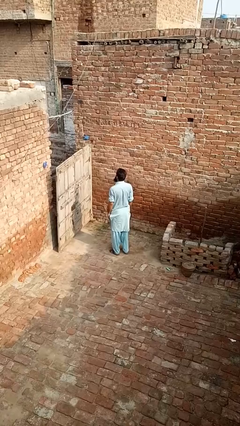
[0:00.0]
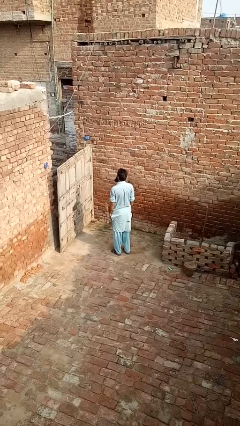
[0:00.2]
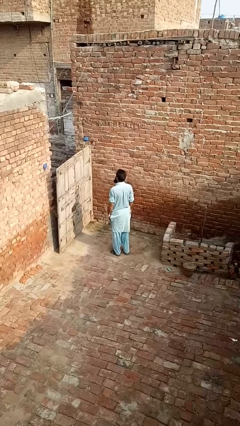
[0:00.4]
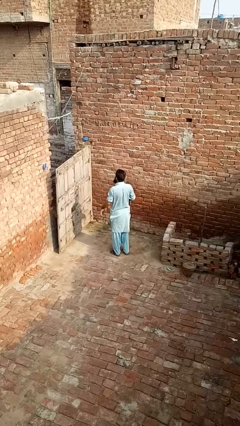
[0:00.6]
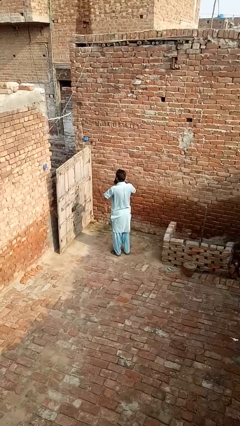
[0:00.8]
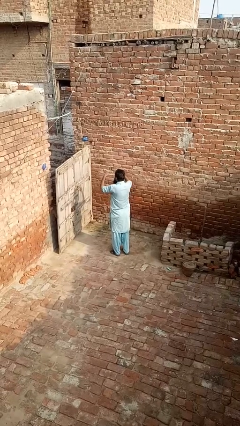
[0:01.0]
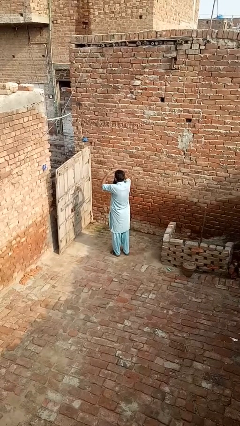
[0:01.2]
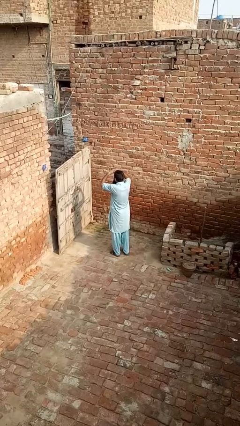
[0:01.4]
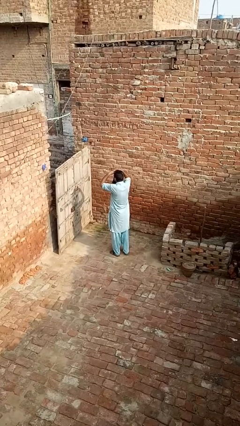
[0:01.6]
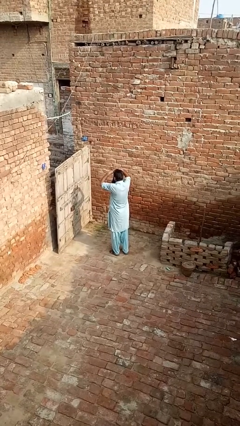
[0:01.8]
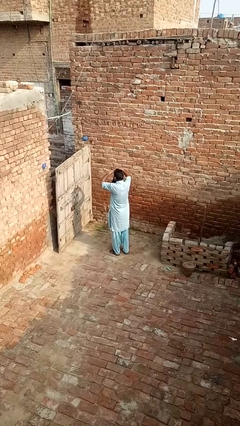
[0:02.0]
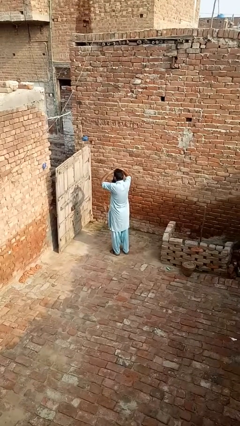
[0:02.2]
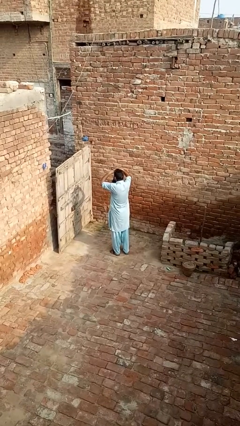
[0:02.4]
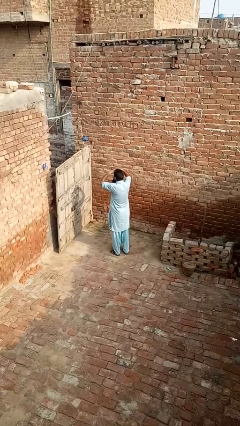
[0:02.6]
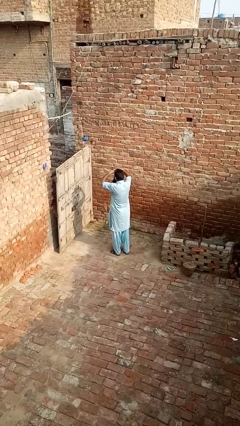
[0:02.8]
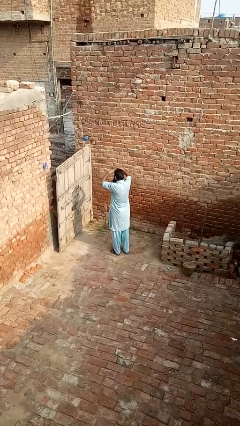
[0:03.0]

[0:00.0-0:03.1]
person shades eyes

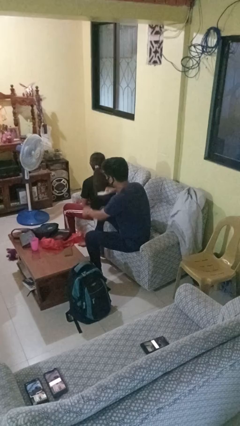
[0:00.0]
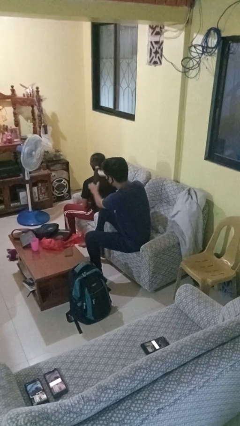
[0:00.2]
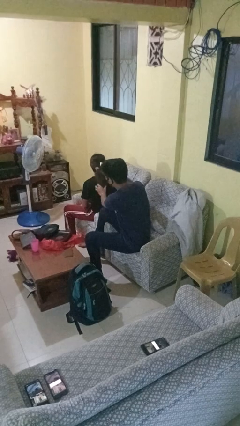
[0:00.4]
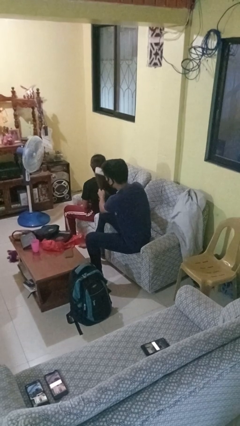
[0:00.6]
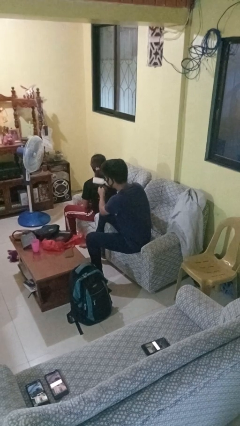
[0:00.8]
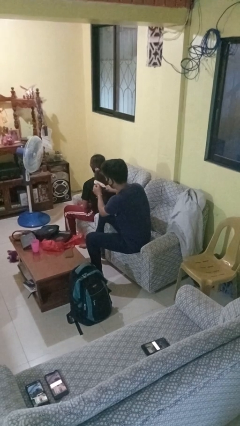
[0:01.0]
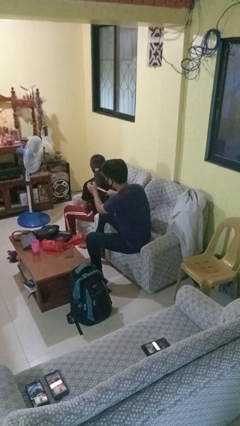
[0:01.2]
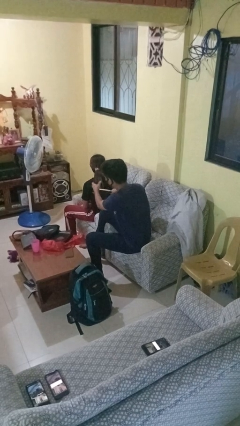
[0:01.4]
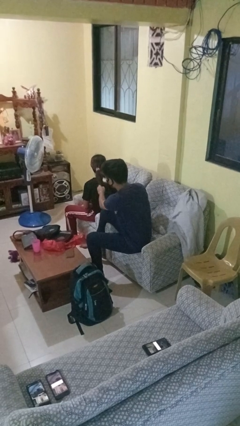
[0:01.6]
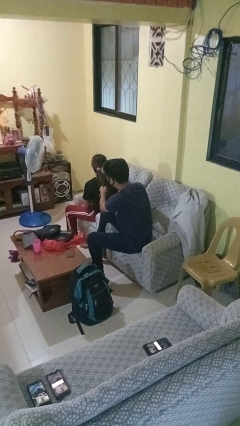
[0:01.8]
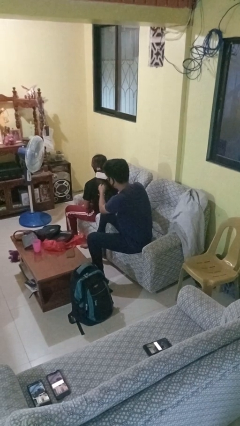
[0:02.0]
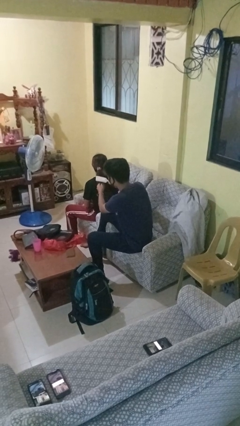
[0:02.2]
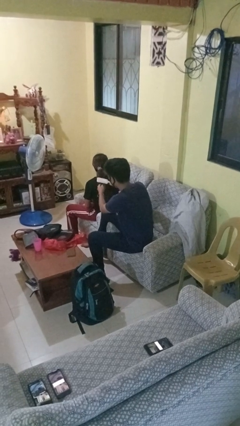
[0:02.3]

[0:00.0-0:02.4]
person brushes hair of person

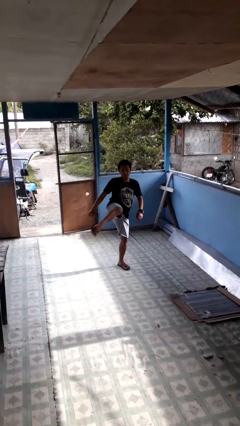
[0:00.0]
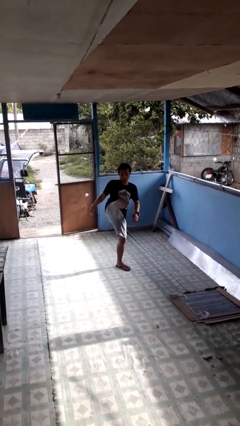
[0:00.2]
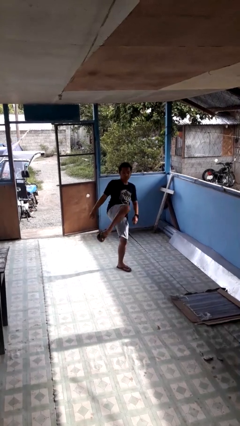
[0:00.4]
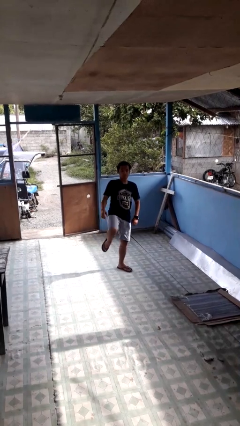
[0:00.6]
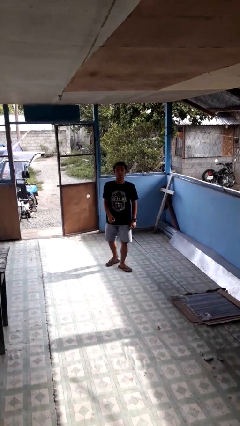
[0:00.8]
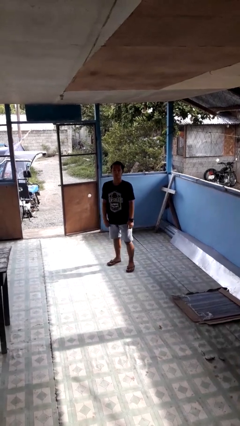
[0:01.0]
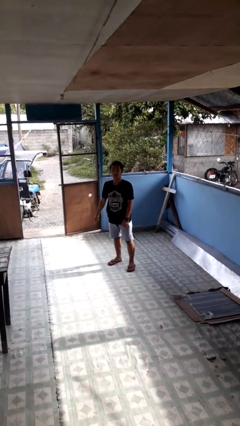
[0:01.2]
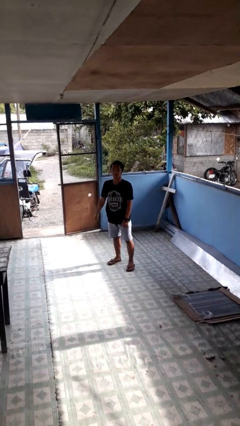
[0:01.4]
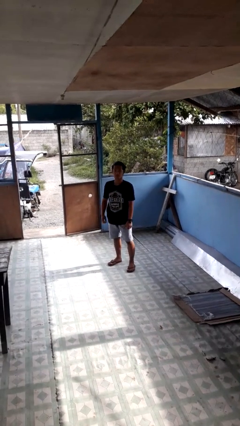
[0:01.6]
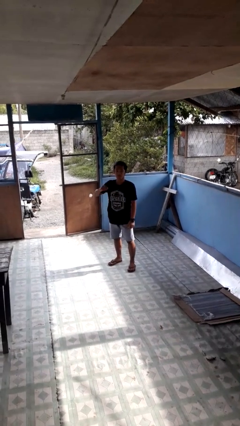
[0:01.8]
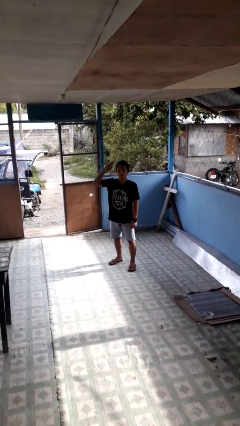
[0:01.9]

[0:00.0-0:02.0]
person karate kicks

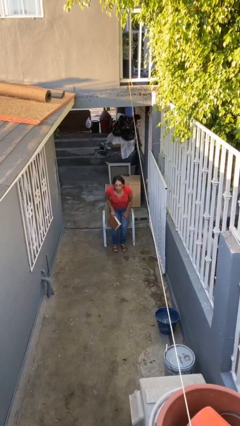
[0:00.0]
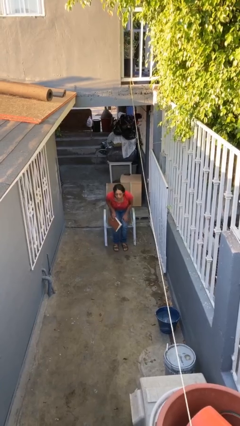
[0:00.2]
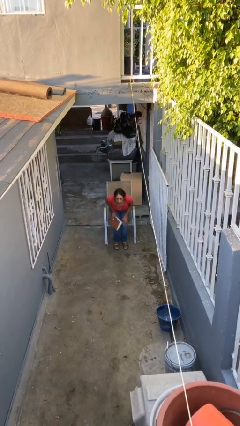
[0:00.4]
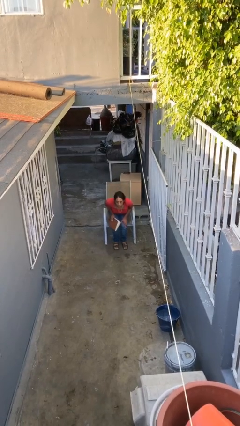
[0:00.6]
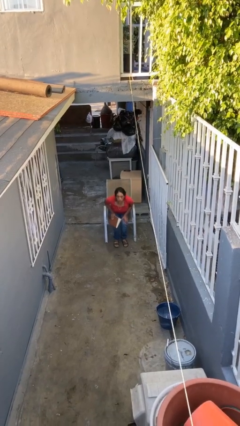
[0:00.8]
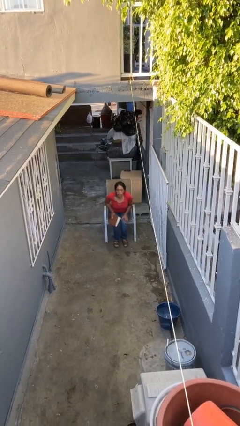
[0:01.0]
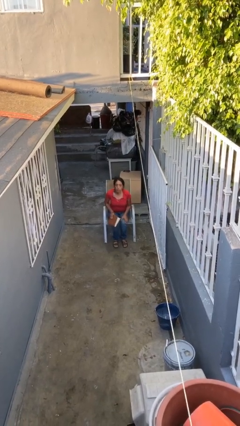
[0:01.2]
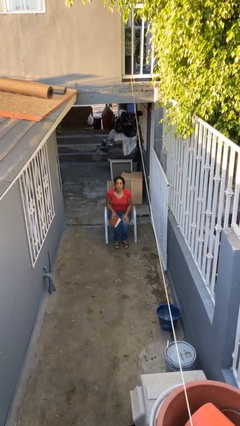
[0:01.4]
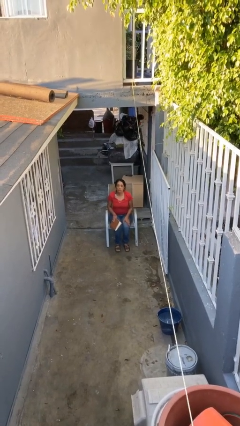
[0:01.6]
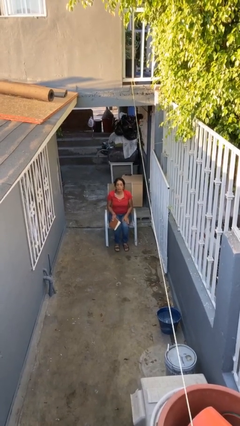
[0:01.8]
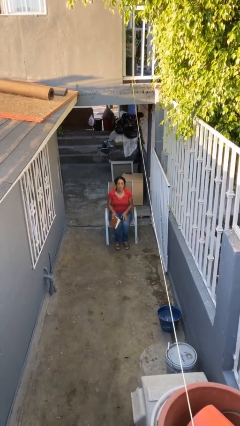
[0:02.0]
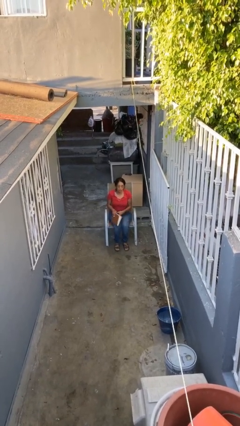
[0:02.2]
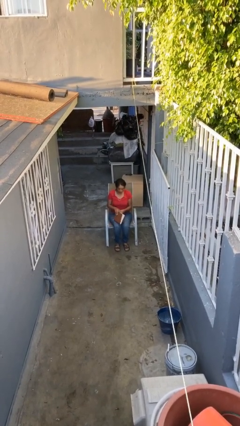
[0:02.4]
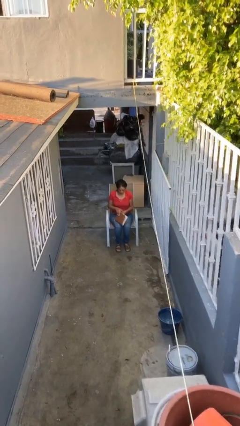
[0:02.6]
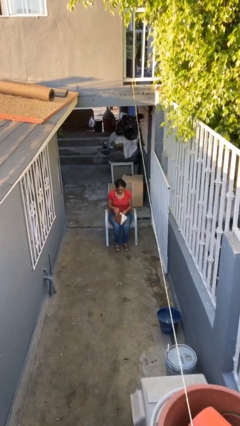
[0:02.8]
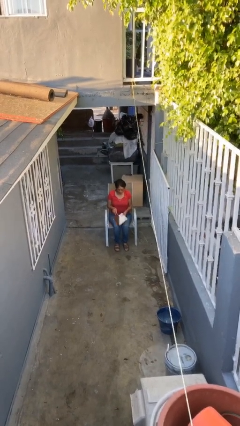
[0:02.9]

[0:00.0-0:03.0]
person sits down

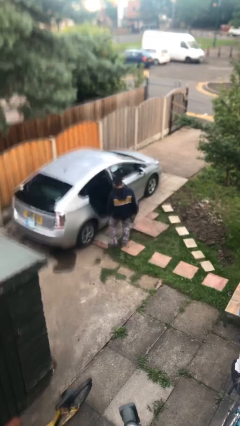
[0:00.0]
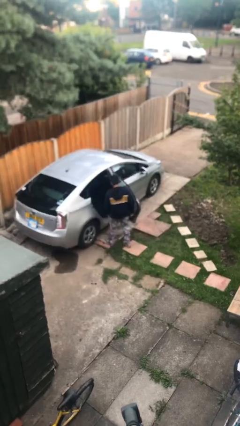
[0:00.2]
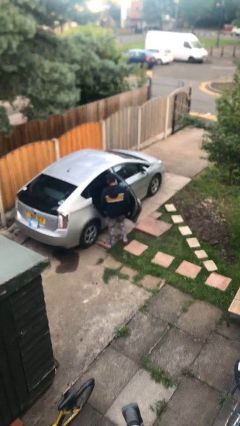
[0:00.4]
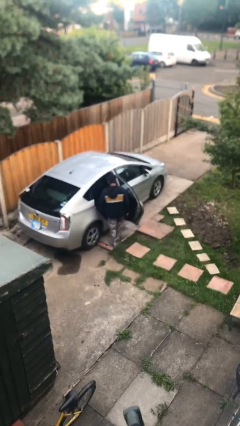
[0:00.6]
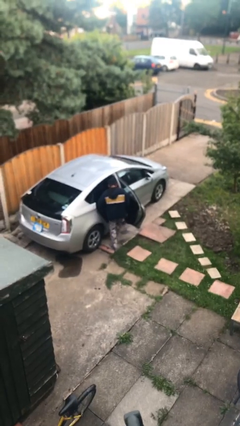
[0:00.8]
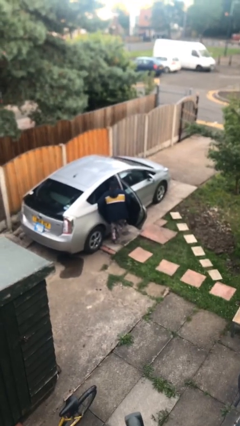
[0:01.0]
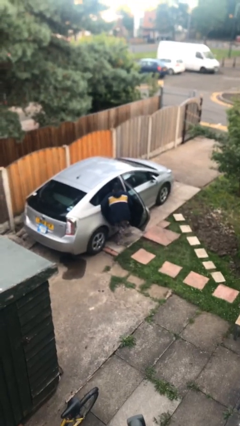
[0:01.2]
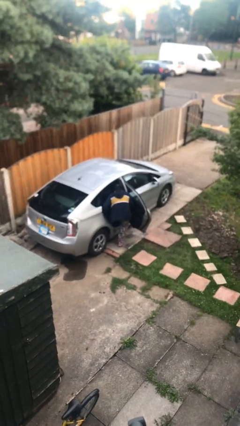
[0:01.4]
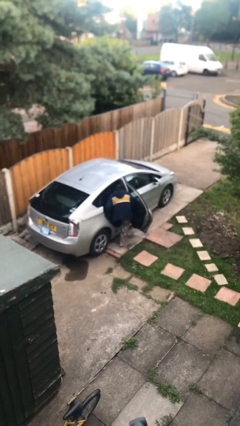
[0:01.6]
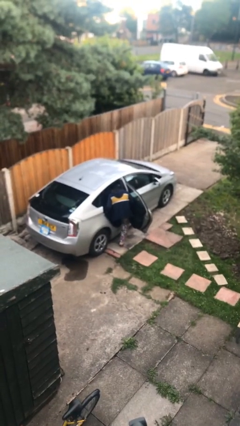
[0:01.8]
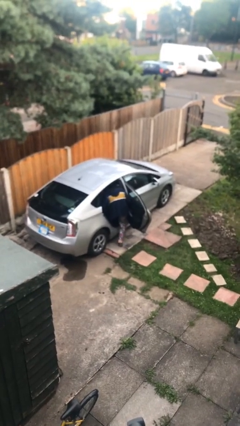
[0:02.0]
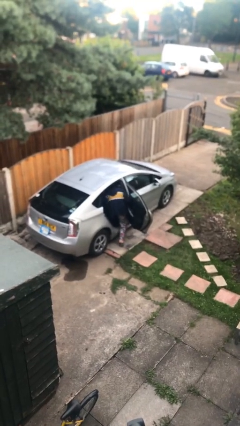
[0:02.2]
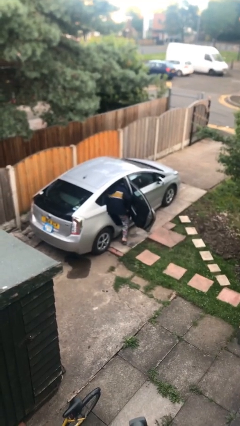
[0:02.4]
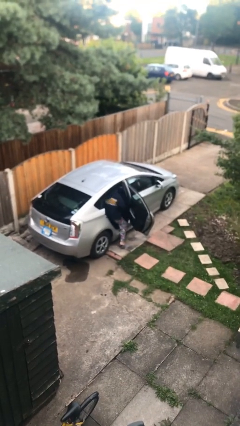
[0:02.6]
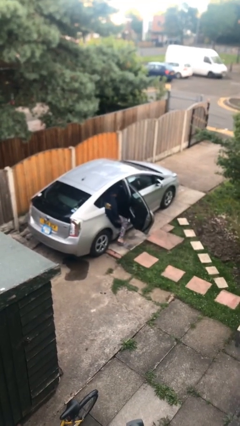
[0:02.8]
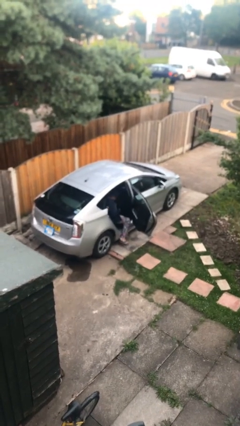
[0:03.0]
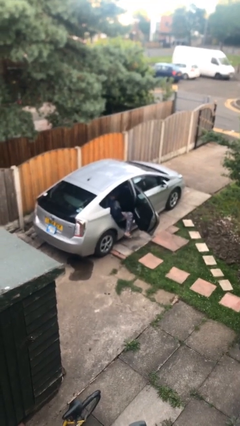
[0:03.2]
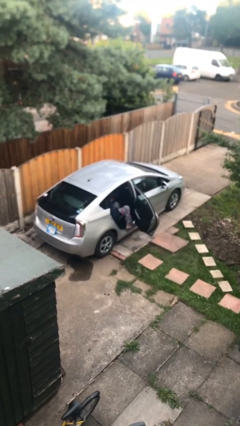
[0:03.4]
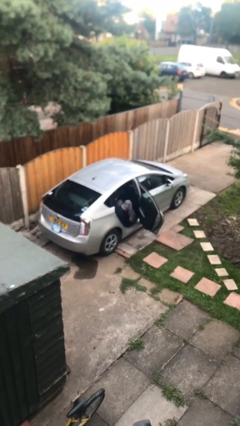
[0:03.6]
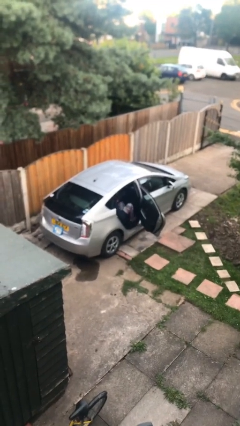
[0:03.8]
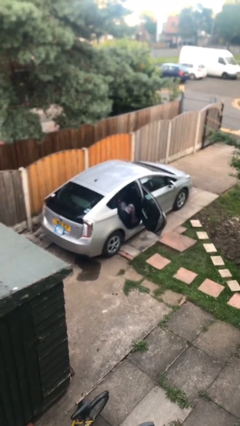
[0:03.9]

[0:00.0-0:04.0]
person enters car

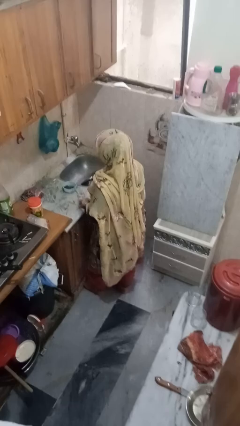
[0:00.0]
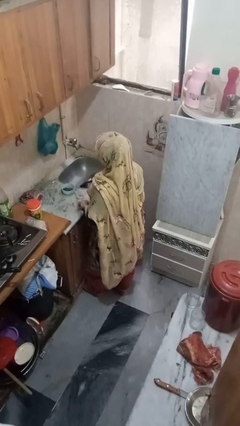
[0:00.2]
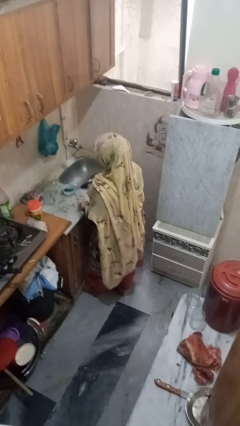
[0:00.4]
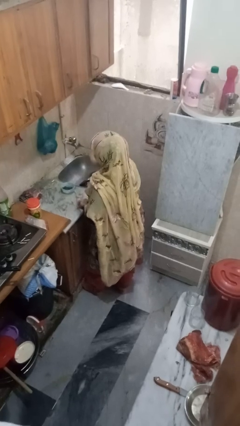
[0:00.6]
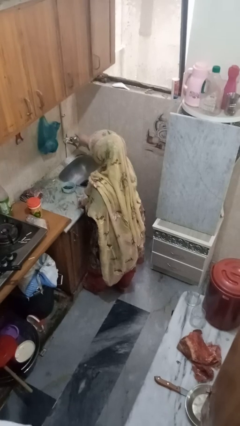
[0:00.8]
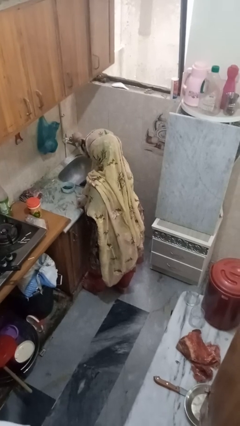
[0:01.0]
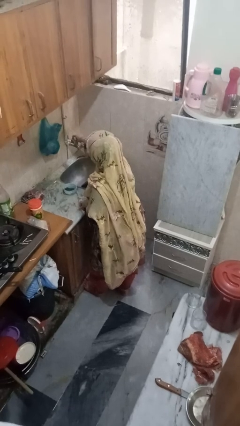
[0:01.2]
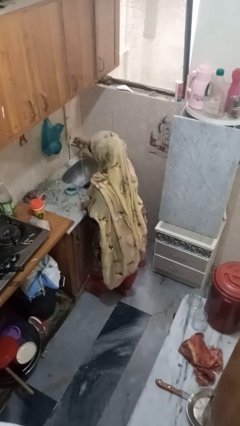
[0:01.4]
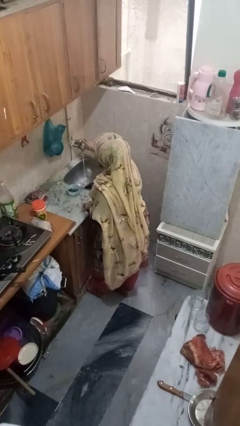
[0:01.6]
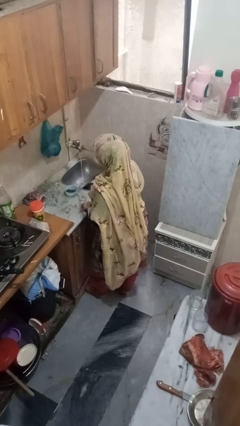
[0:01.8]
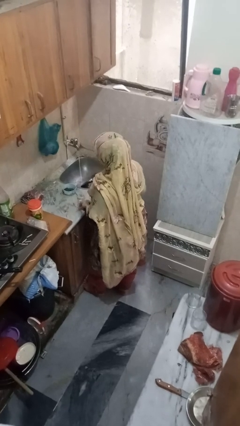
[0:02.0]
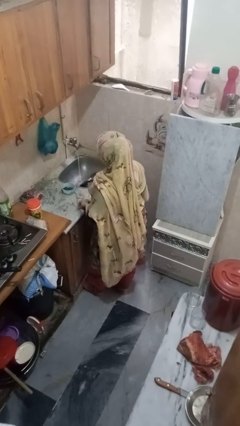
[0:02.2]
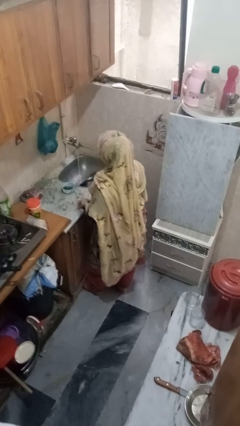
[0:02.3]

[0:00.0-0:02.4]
person turns on faucet

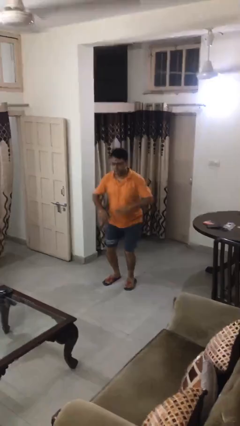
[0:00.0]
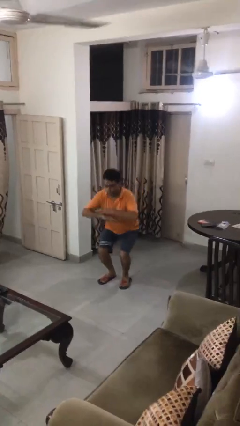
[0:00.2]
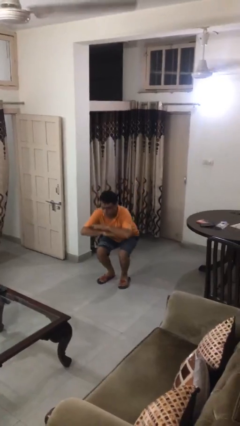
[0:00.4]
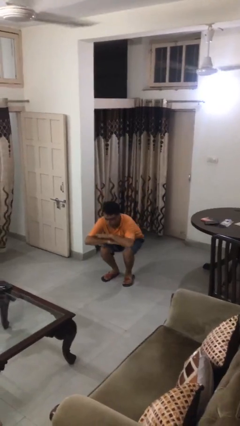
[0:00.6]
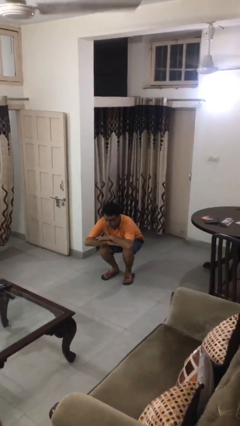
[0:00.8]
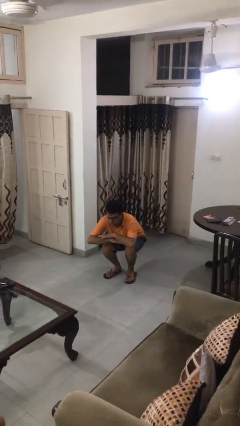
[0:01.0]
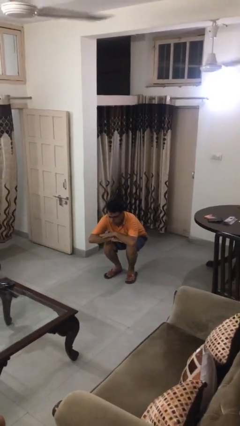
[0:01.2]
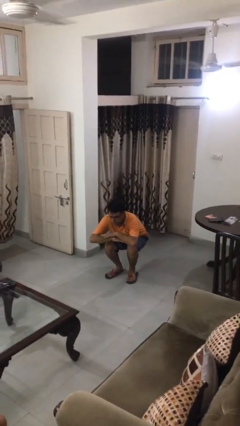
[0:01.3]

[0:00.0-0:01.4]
person squats
